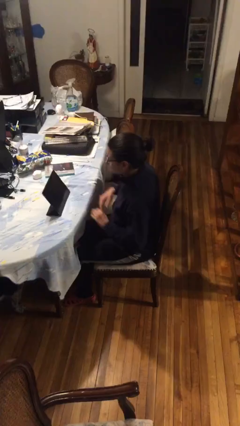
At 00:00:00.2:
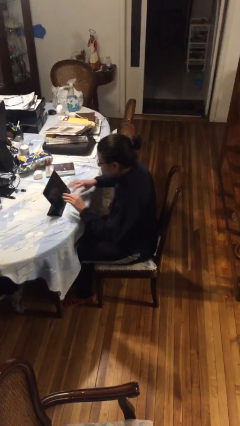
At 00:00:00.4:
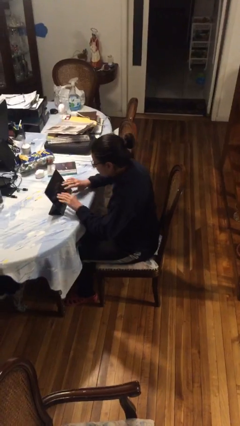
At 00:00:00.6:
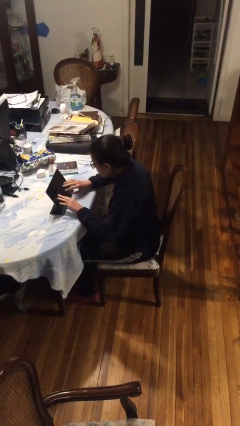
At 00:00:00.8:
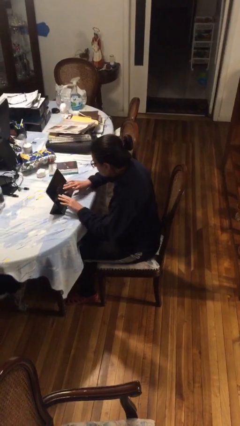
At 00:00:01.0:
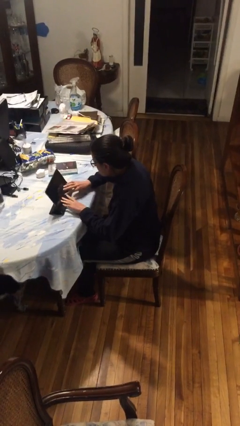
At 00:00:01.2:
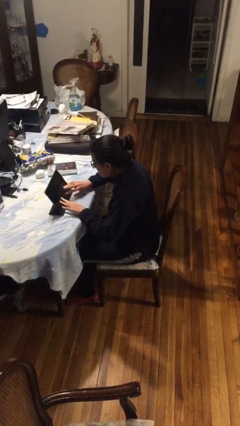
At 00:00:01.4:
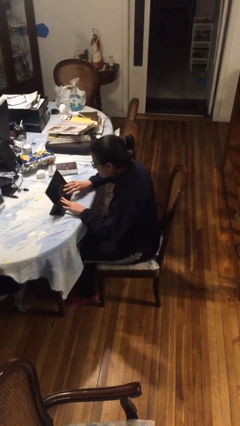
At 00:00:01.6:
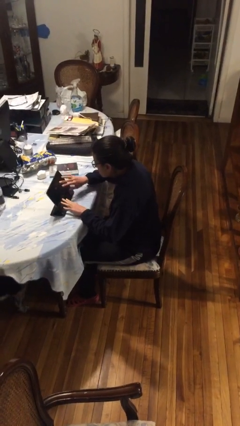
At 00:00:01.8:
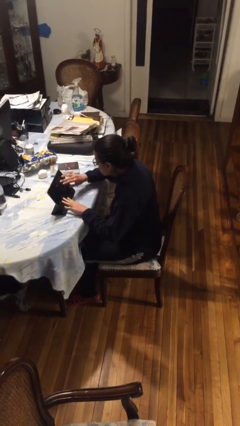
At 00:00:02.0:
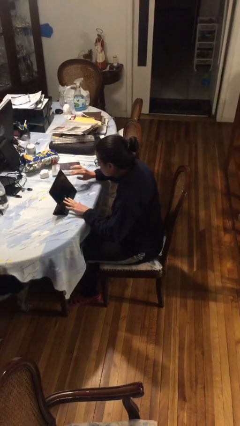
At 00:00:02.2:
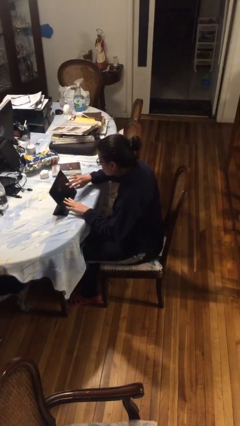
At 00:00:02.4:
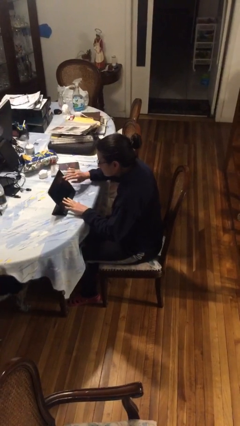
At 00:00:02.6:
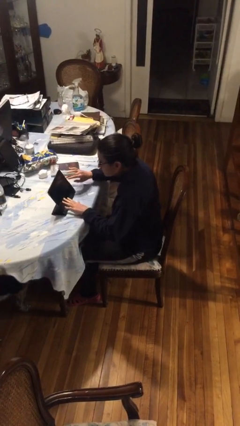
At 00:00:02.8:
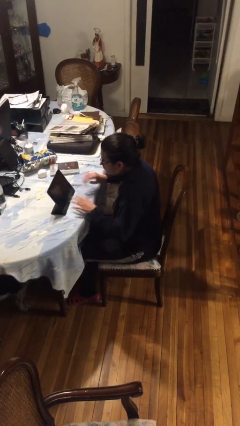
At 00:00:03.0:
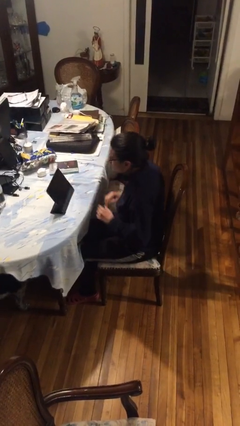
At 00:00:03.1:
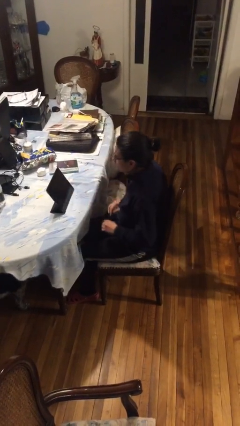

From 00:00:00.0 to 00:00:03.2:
person interacts with tablet

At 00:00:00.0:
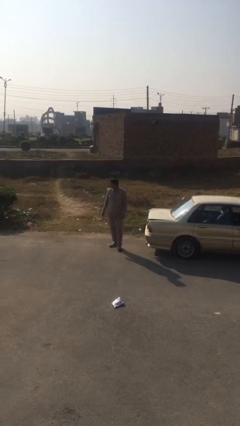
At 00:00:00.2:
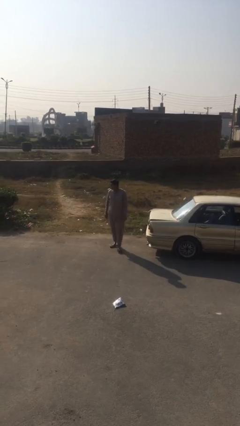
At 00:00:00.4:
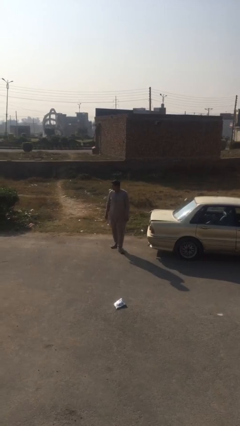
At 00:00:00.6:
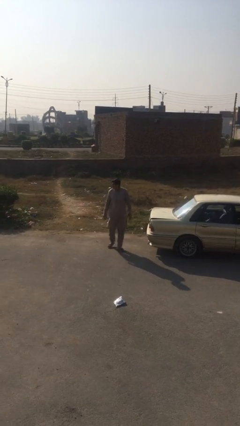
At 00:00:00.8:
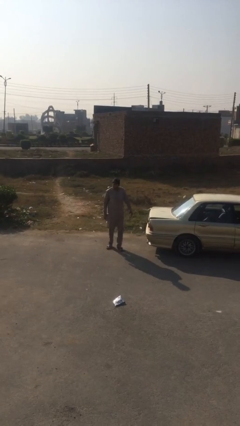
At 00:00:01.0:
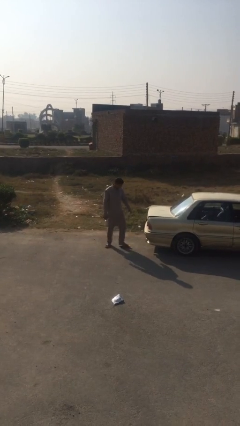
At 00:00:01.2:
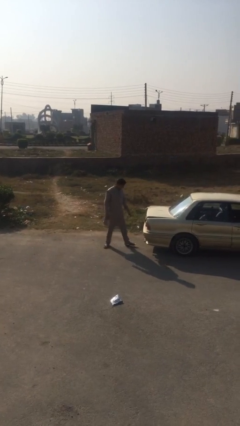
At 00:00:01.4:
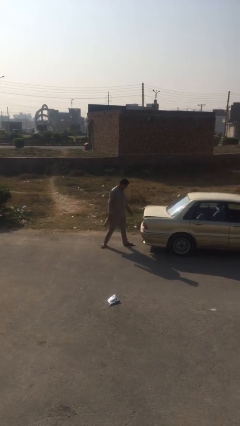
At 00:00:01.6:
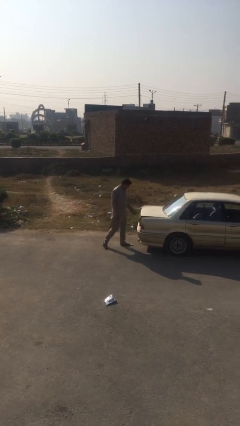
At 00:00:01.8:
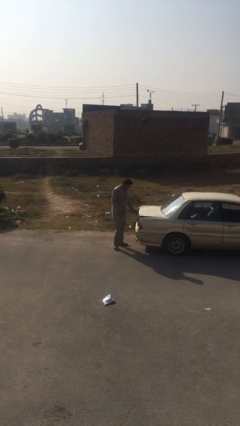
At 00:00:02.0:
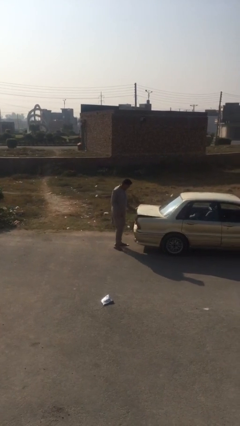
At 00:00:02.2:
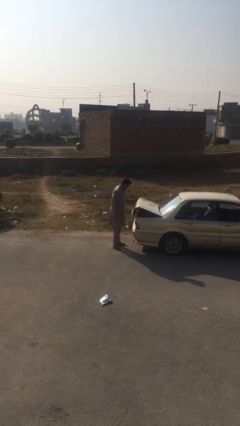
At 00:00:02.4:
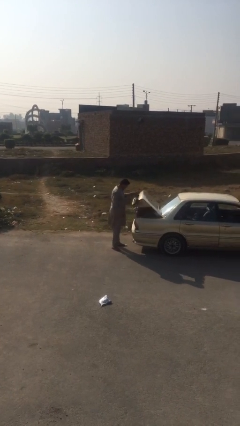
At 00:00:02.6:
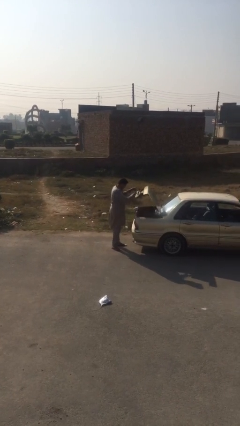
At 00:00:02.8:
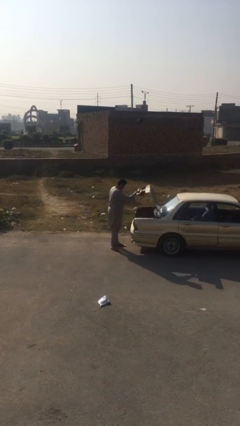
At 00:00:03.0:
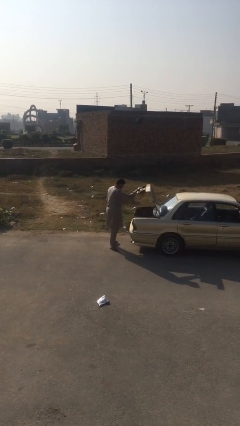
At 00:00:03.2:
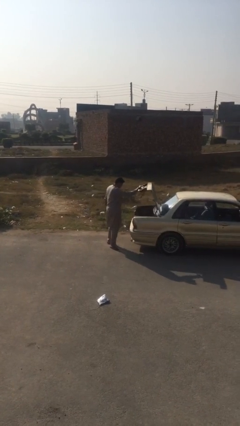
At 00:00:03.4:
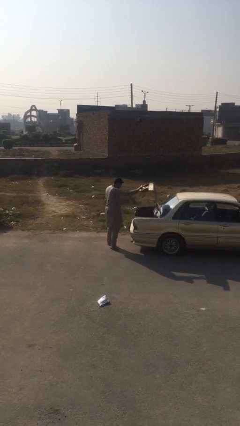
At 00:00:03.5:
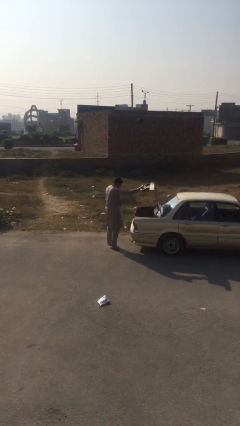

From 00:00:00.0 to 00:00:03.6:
person opens car trunk

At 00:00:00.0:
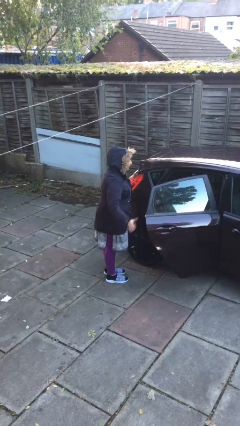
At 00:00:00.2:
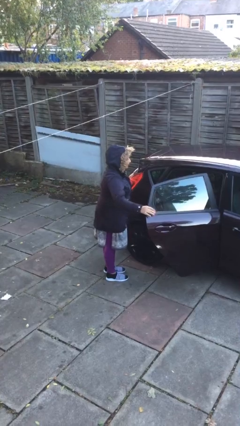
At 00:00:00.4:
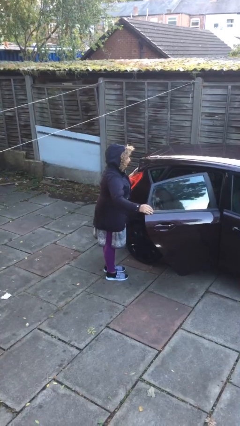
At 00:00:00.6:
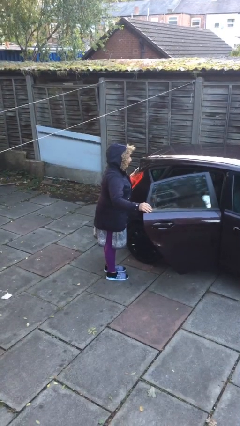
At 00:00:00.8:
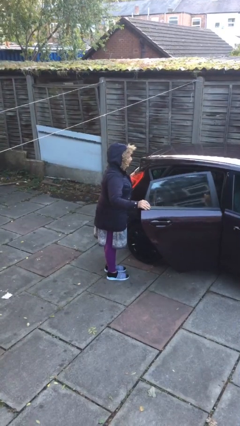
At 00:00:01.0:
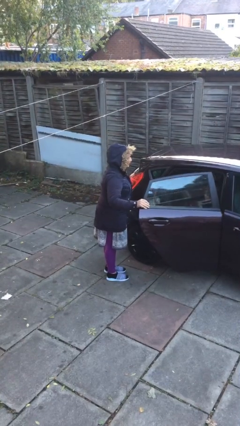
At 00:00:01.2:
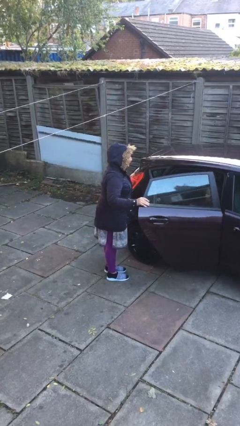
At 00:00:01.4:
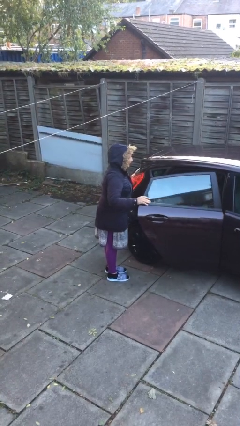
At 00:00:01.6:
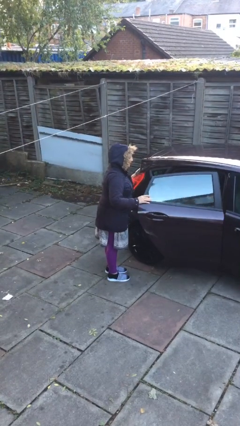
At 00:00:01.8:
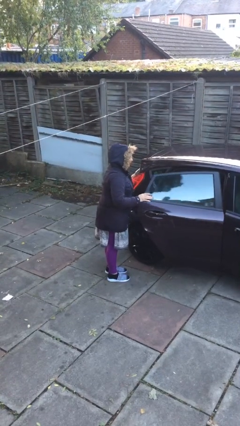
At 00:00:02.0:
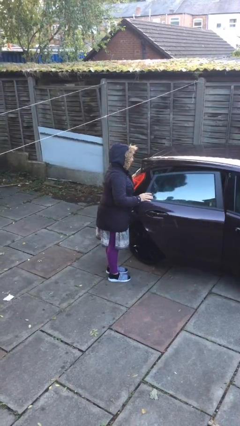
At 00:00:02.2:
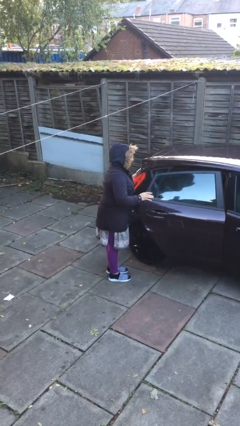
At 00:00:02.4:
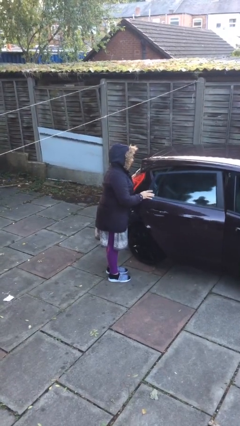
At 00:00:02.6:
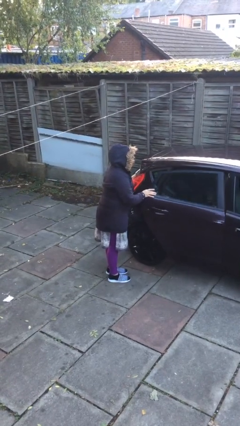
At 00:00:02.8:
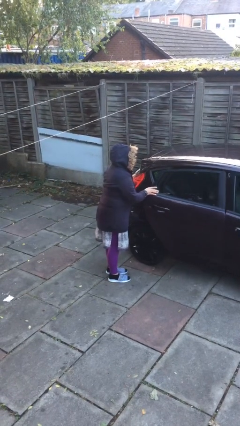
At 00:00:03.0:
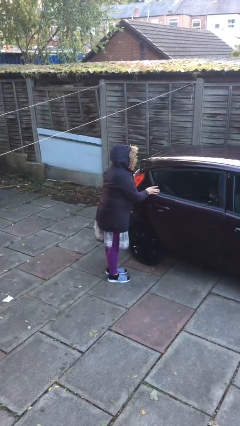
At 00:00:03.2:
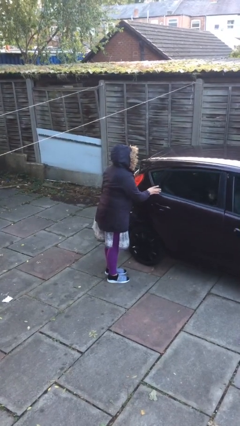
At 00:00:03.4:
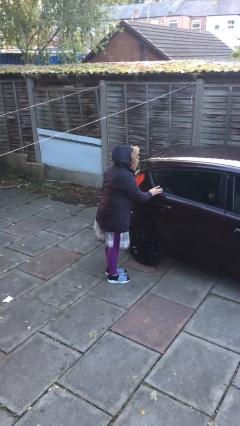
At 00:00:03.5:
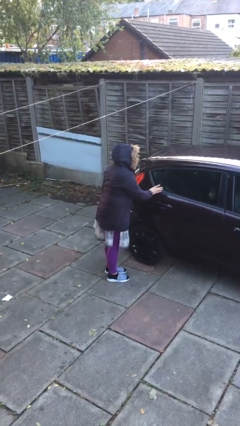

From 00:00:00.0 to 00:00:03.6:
person closes car door

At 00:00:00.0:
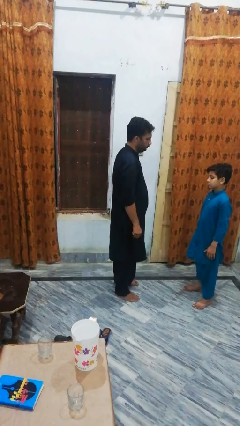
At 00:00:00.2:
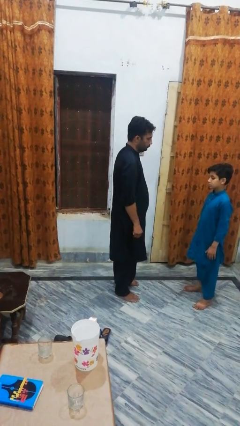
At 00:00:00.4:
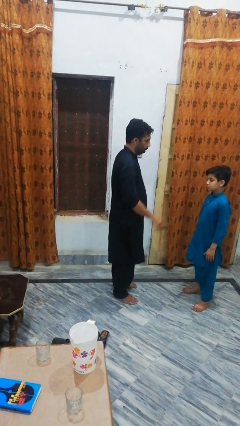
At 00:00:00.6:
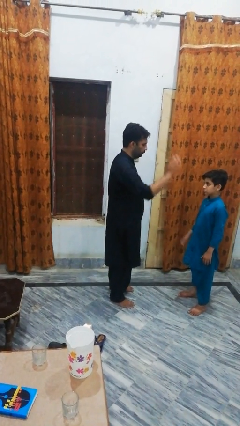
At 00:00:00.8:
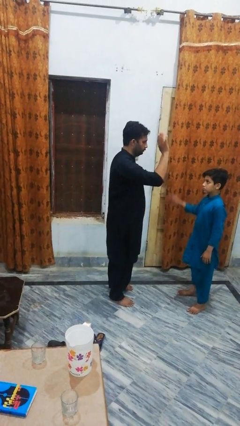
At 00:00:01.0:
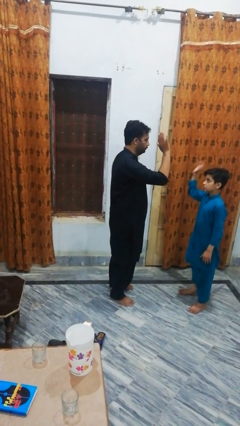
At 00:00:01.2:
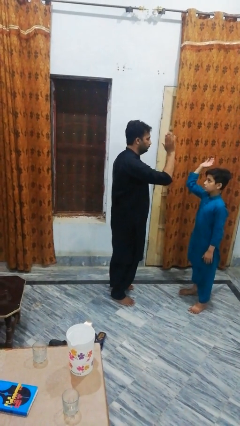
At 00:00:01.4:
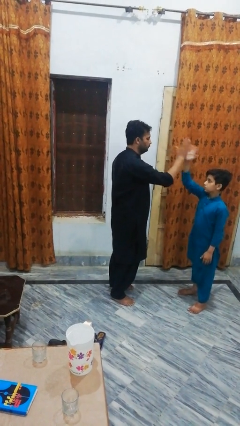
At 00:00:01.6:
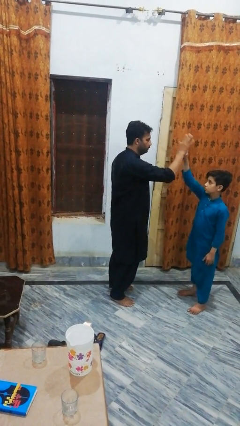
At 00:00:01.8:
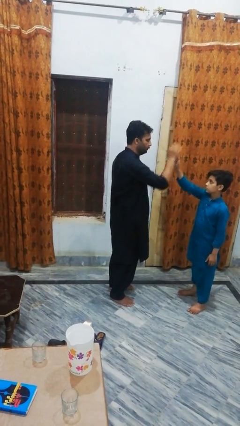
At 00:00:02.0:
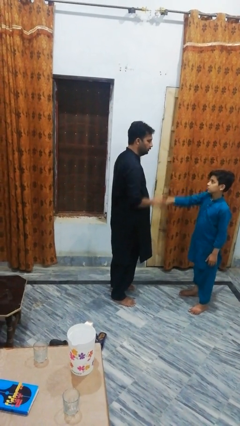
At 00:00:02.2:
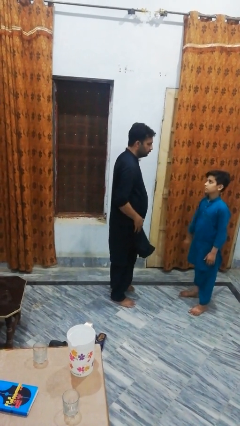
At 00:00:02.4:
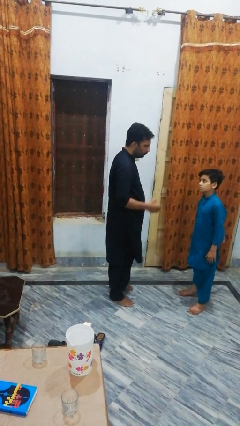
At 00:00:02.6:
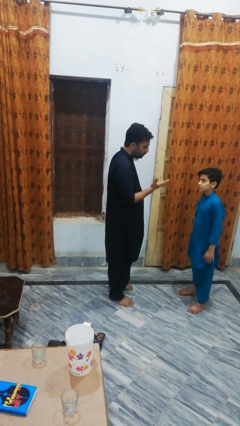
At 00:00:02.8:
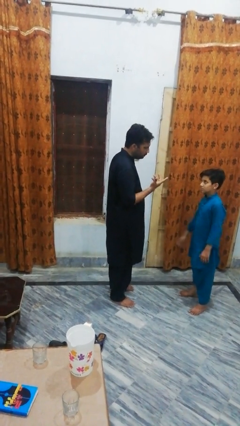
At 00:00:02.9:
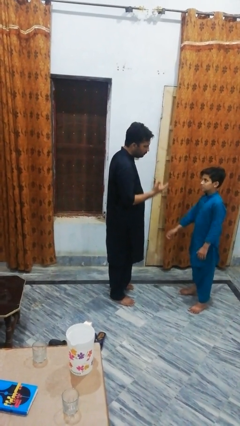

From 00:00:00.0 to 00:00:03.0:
person highfives hand

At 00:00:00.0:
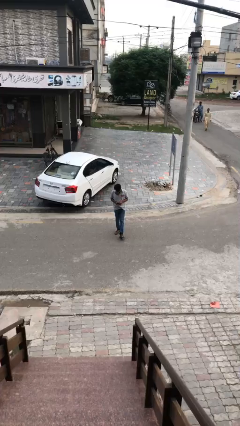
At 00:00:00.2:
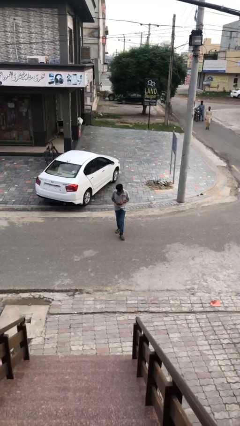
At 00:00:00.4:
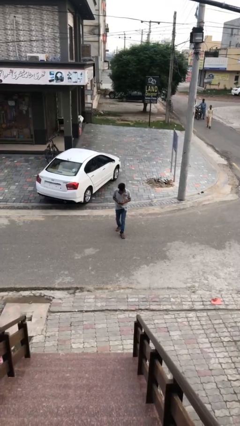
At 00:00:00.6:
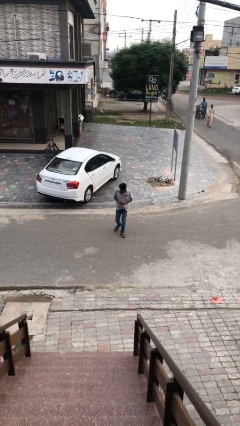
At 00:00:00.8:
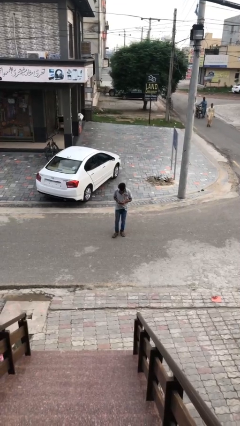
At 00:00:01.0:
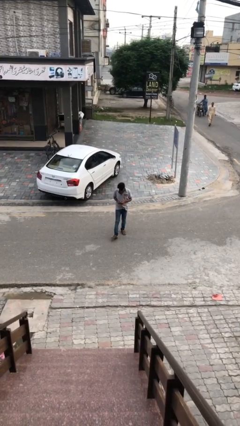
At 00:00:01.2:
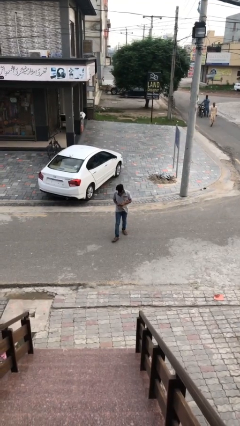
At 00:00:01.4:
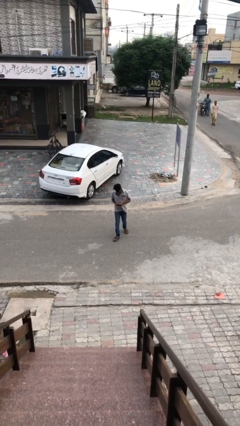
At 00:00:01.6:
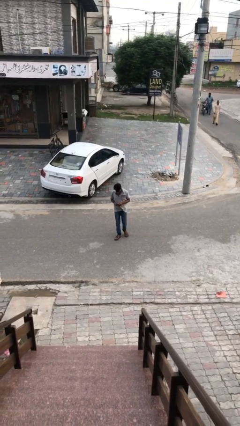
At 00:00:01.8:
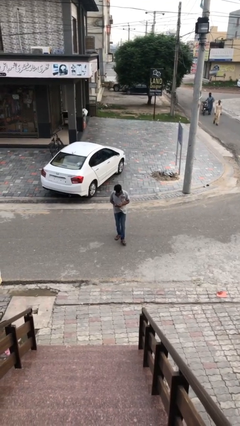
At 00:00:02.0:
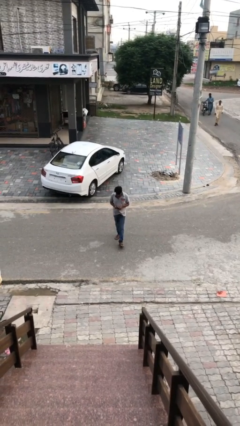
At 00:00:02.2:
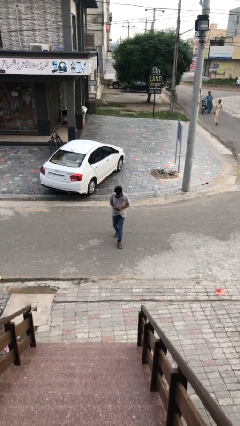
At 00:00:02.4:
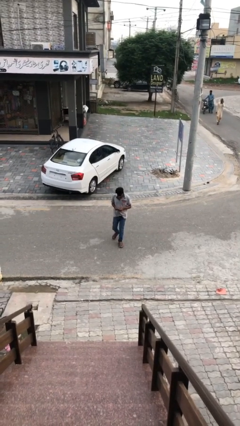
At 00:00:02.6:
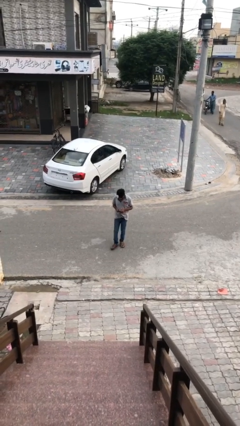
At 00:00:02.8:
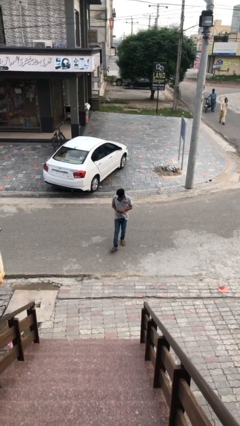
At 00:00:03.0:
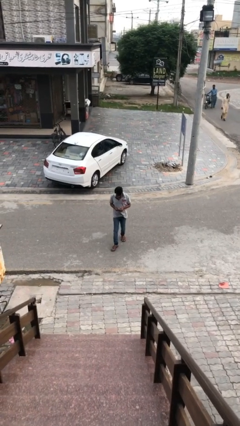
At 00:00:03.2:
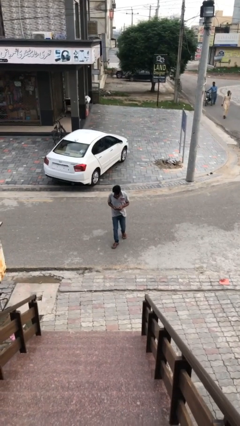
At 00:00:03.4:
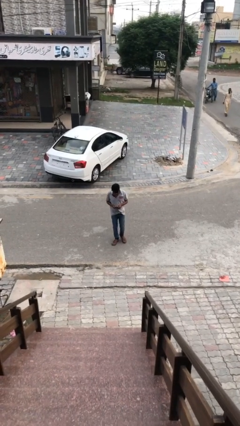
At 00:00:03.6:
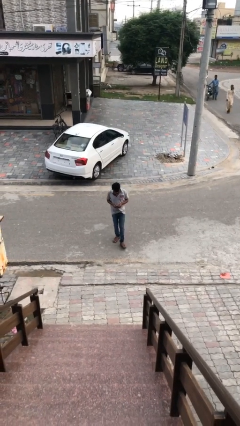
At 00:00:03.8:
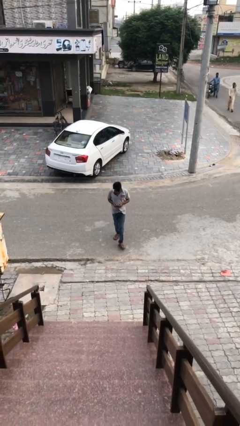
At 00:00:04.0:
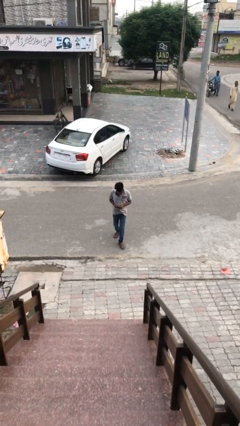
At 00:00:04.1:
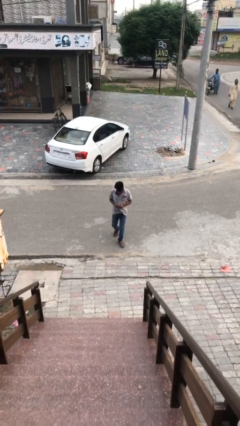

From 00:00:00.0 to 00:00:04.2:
person texts on phone
